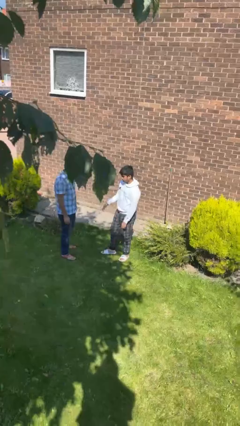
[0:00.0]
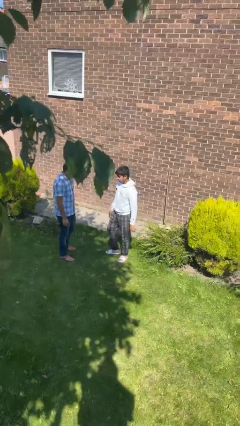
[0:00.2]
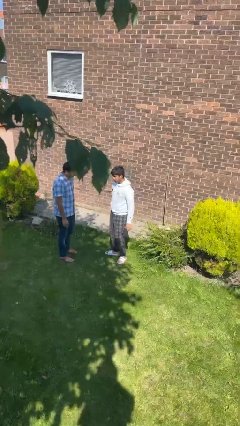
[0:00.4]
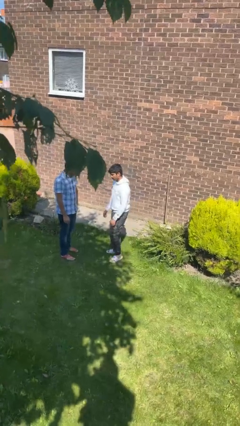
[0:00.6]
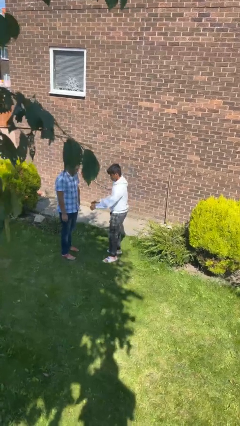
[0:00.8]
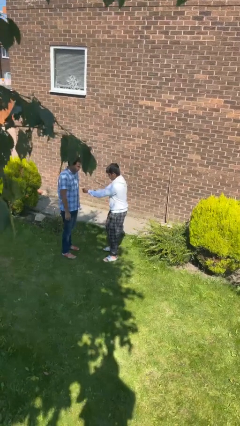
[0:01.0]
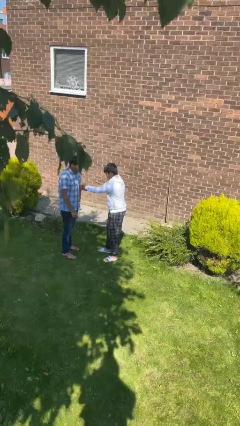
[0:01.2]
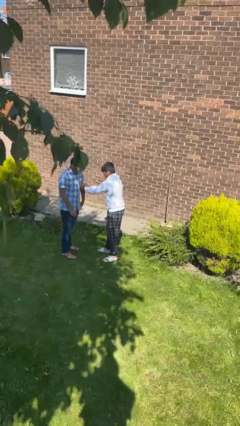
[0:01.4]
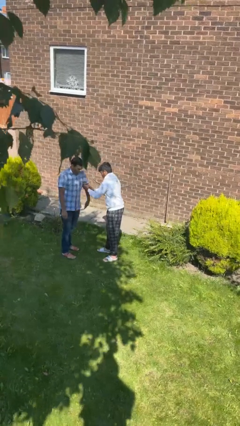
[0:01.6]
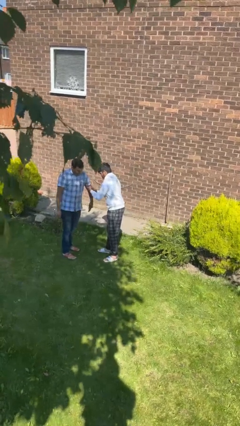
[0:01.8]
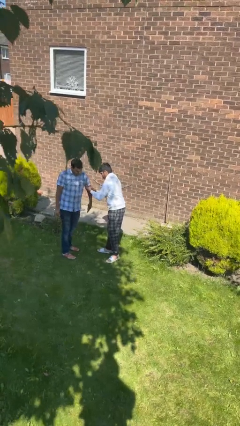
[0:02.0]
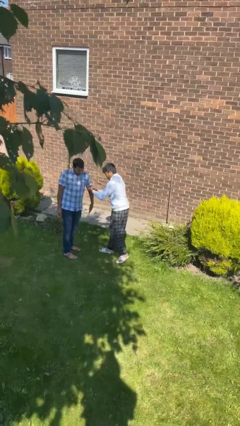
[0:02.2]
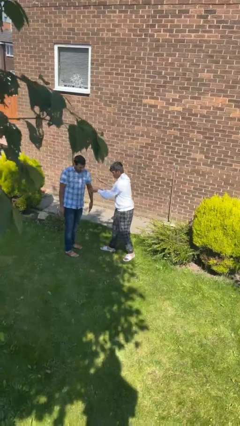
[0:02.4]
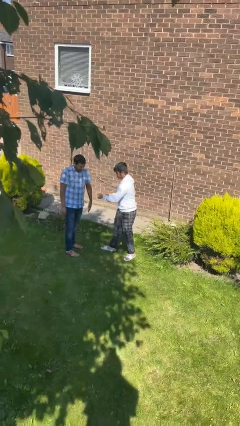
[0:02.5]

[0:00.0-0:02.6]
person grabs person by bicep

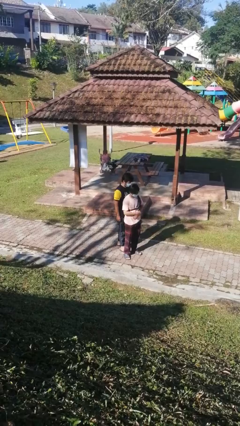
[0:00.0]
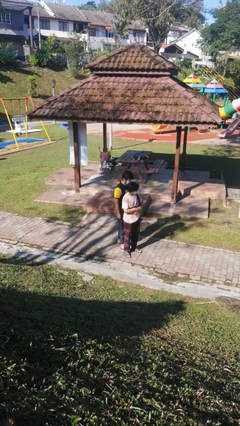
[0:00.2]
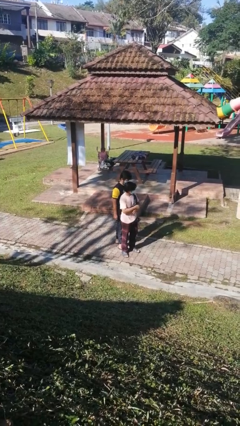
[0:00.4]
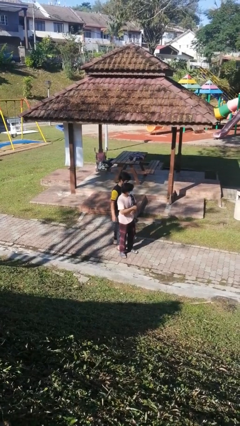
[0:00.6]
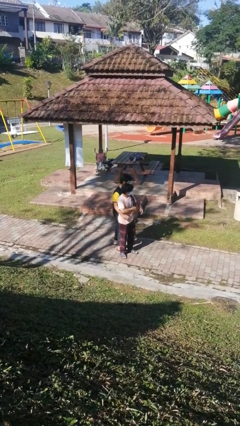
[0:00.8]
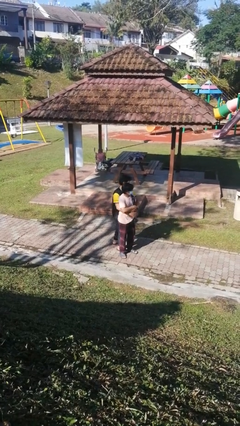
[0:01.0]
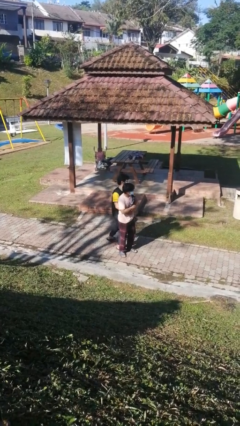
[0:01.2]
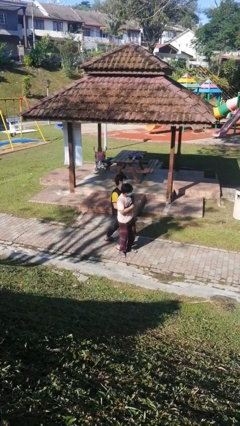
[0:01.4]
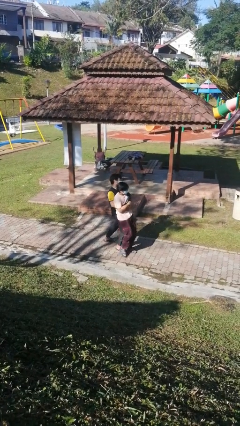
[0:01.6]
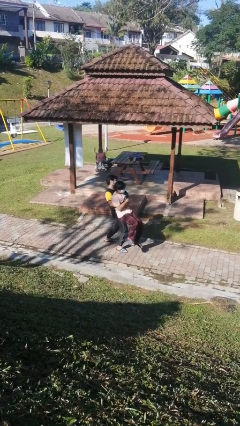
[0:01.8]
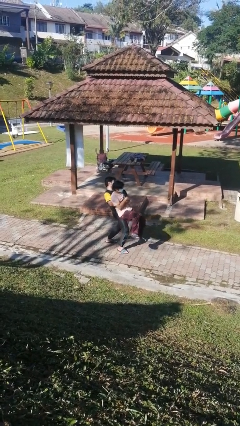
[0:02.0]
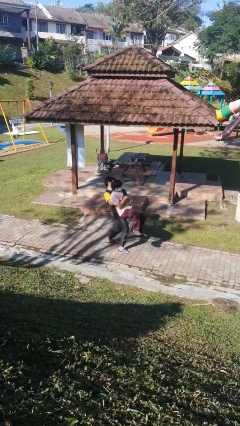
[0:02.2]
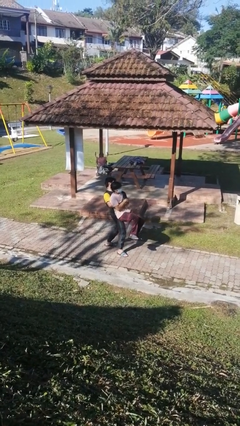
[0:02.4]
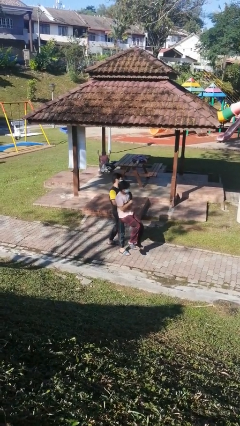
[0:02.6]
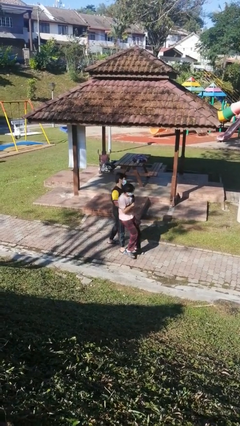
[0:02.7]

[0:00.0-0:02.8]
person picks up person

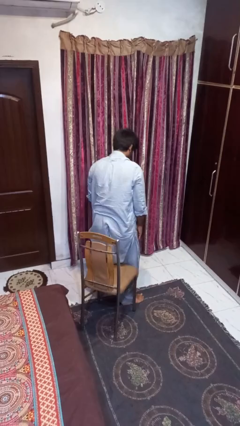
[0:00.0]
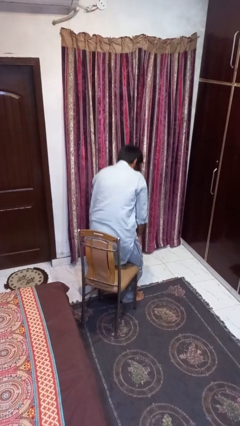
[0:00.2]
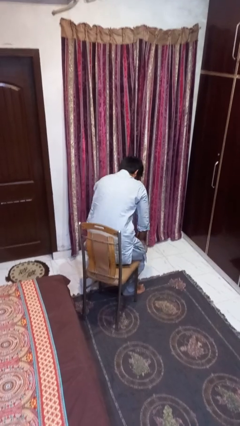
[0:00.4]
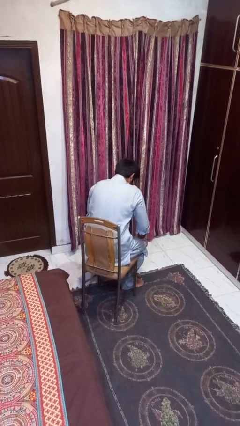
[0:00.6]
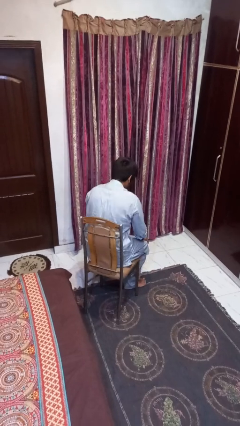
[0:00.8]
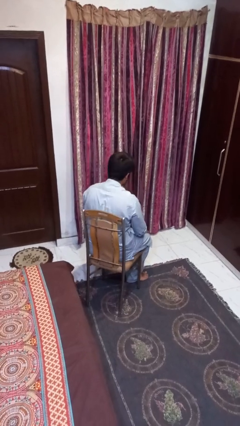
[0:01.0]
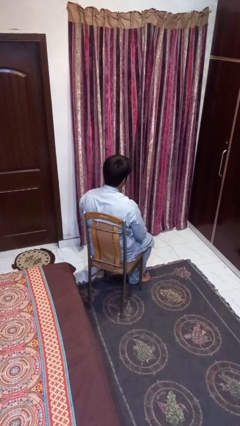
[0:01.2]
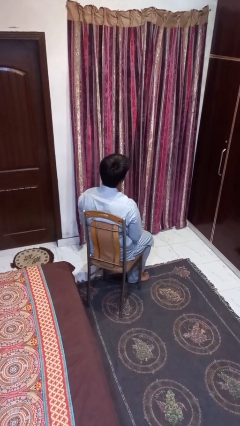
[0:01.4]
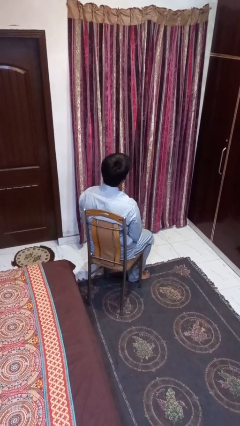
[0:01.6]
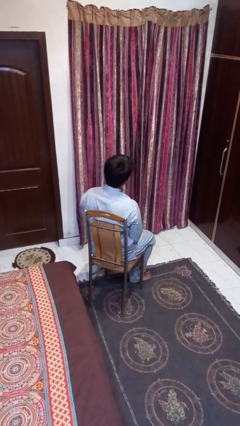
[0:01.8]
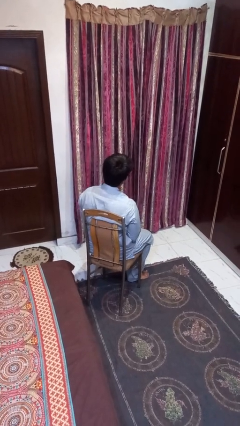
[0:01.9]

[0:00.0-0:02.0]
person sits down

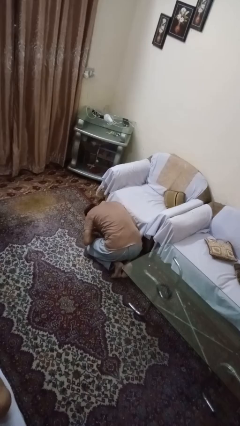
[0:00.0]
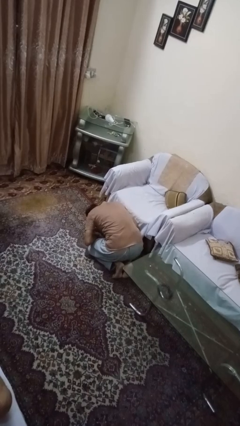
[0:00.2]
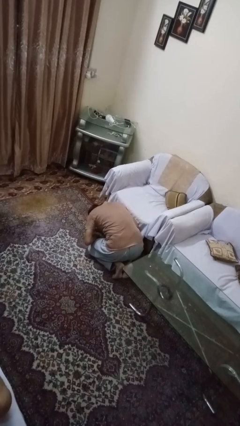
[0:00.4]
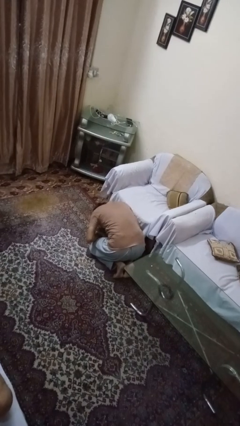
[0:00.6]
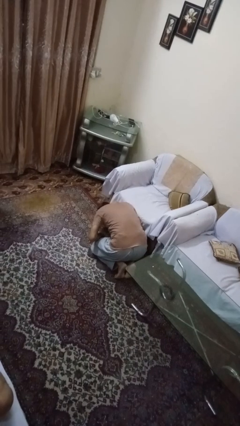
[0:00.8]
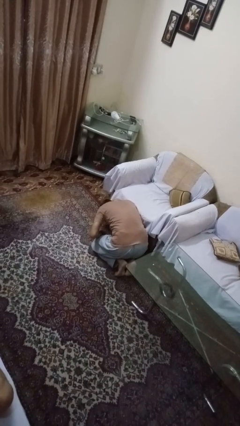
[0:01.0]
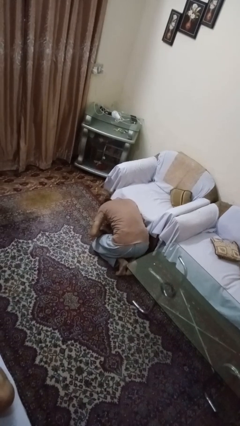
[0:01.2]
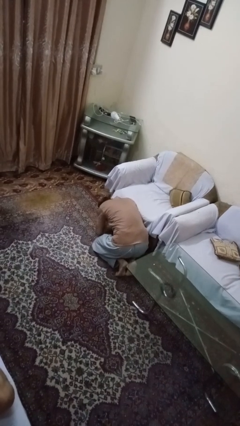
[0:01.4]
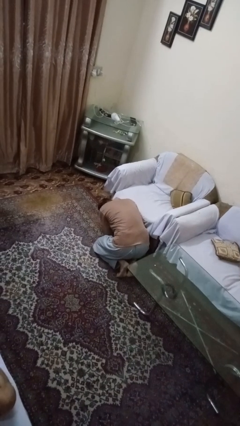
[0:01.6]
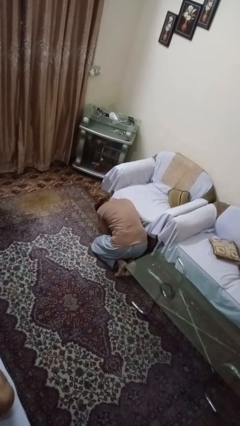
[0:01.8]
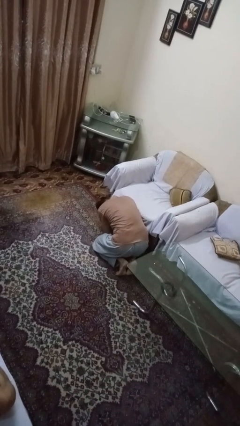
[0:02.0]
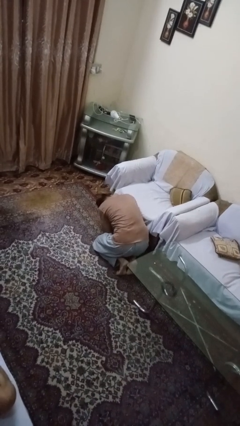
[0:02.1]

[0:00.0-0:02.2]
person searches under couch

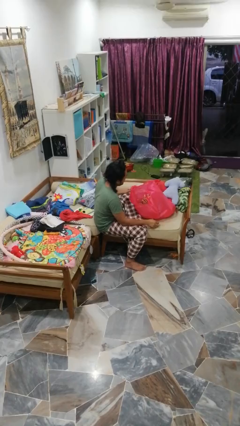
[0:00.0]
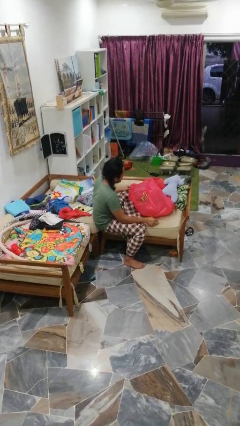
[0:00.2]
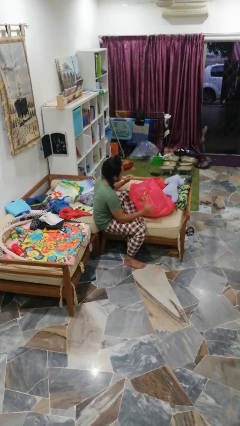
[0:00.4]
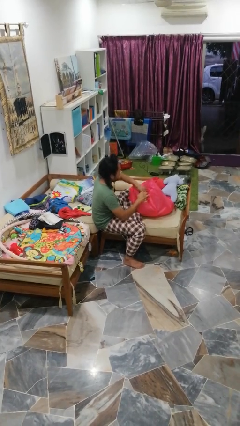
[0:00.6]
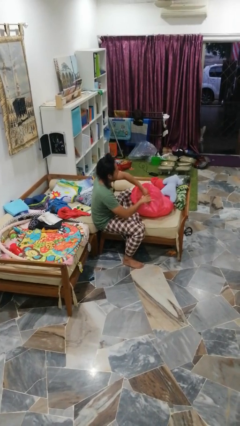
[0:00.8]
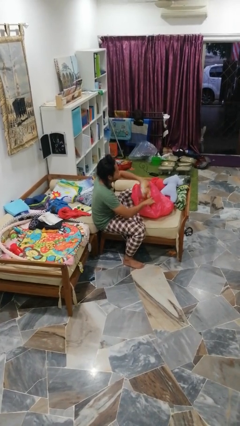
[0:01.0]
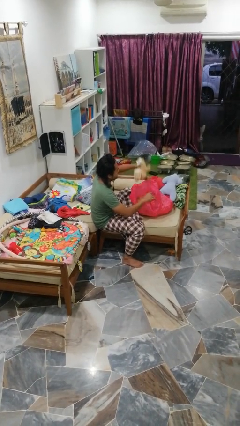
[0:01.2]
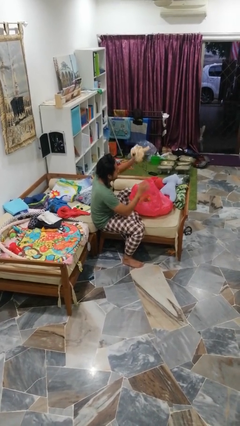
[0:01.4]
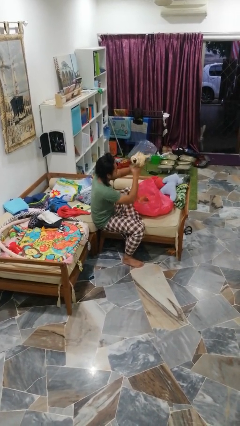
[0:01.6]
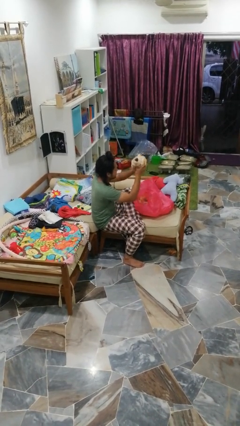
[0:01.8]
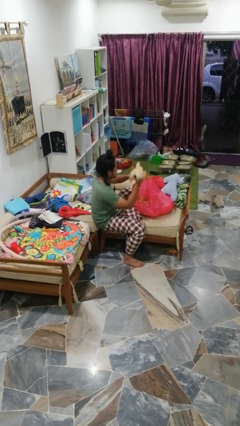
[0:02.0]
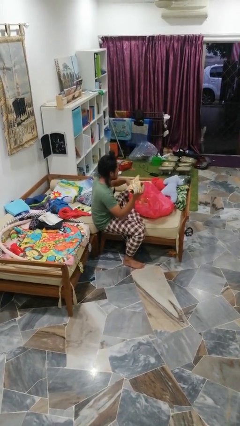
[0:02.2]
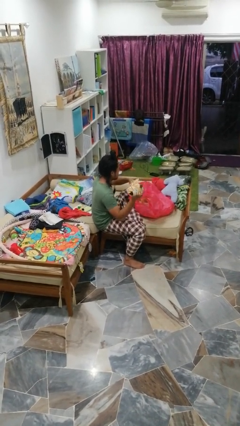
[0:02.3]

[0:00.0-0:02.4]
person takes object from bag

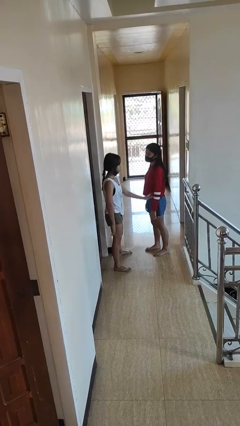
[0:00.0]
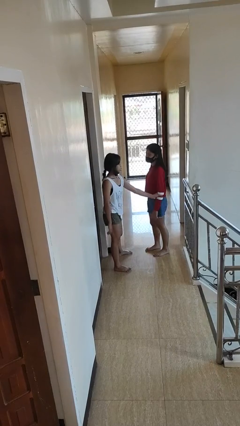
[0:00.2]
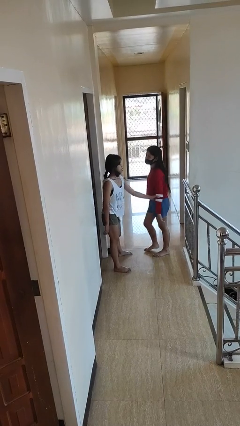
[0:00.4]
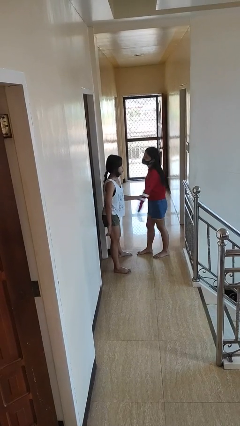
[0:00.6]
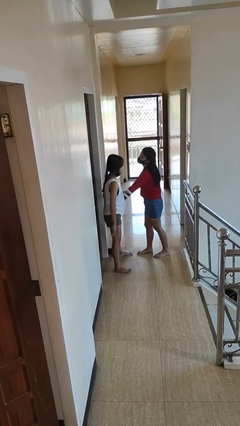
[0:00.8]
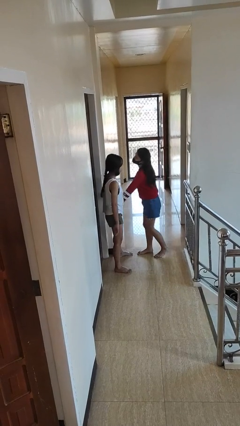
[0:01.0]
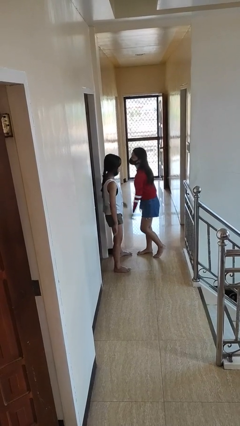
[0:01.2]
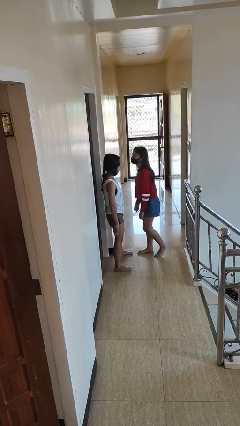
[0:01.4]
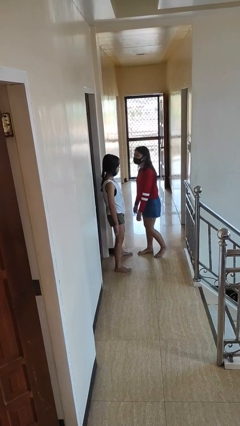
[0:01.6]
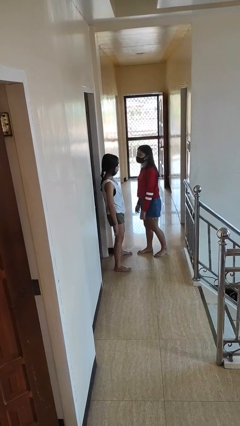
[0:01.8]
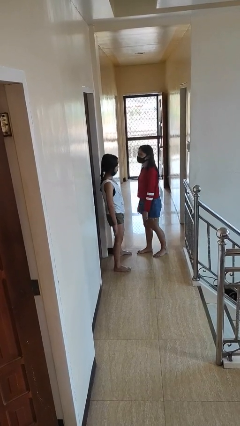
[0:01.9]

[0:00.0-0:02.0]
person grabs person by forearm

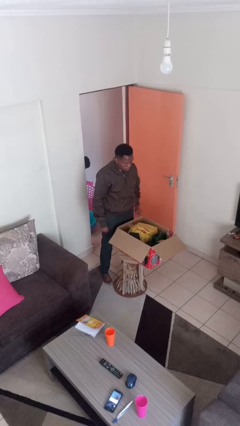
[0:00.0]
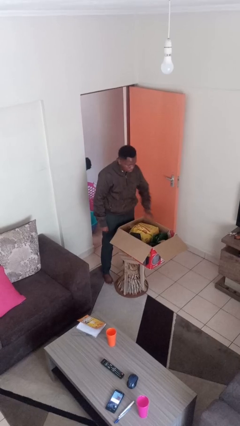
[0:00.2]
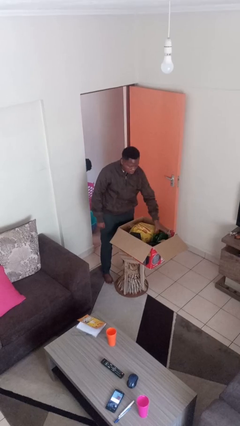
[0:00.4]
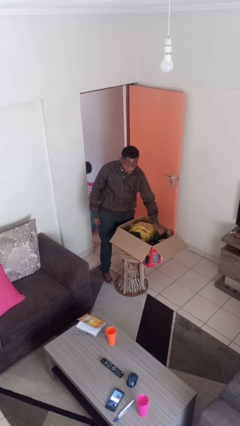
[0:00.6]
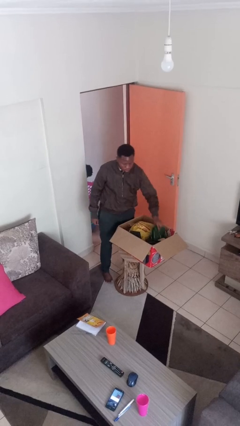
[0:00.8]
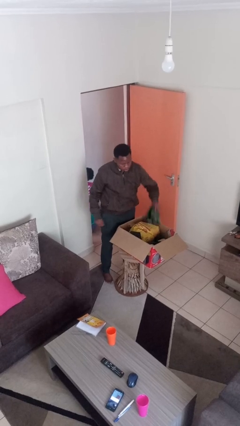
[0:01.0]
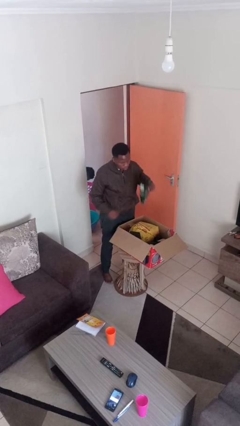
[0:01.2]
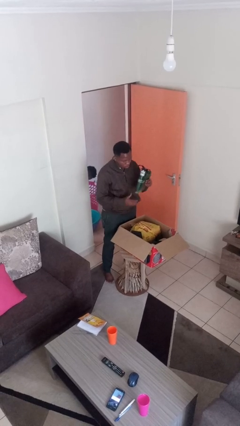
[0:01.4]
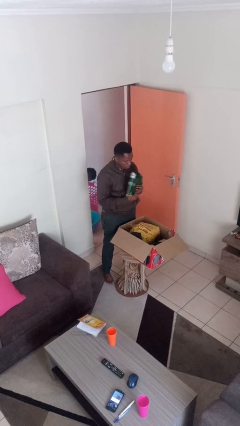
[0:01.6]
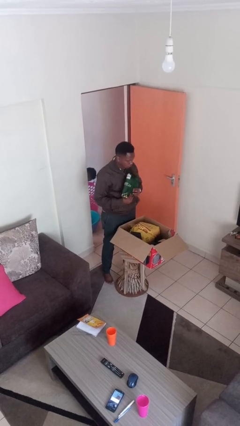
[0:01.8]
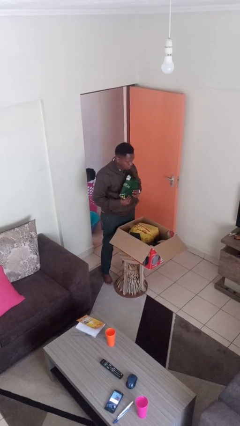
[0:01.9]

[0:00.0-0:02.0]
person takes object from box

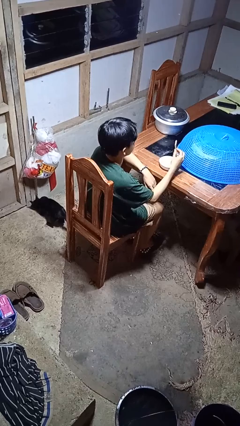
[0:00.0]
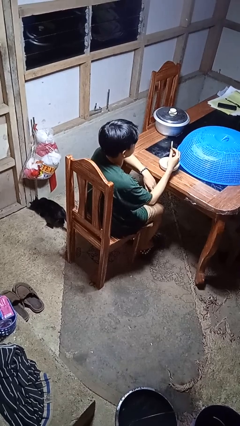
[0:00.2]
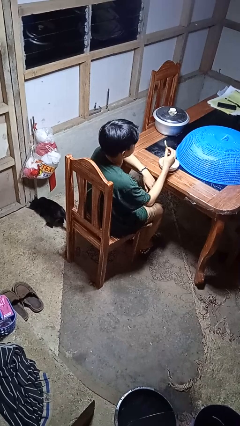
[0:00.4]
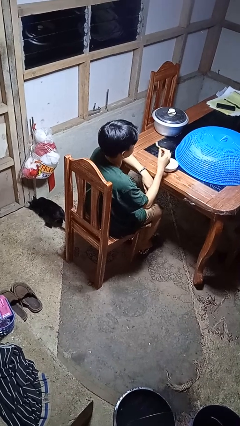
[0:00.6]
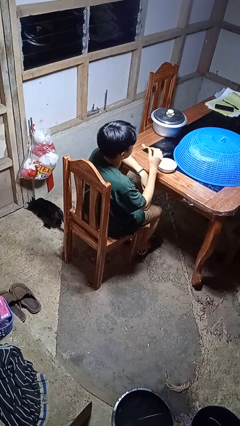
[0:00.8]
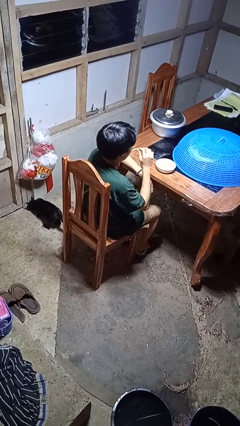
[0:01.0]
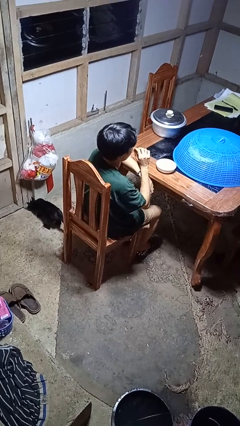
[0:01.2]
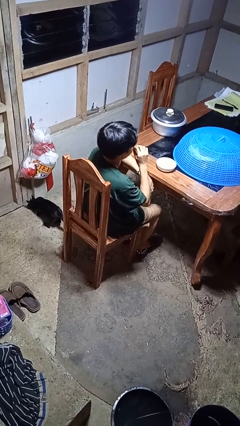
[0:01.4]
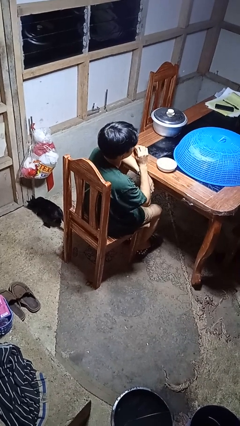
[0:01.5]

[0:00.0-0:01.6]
person eats with hands
